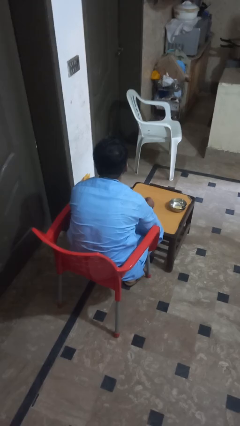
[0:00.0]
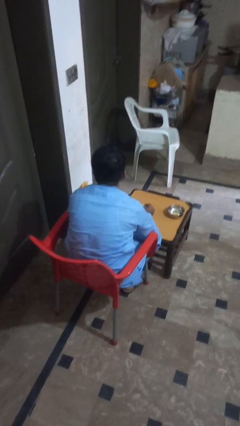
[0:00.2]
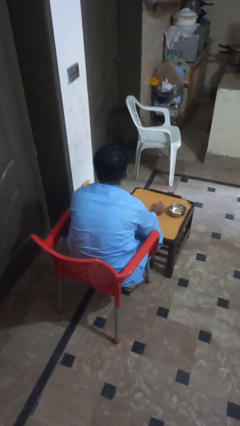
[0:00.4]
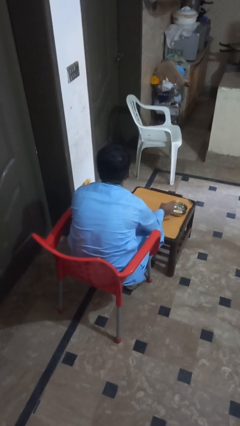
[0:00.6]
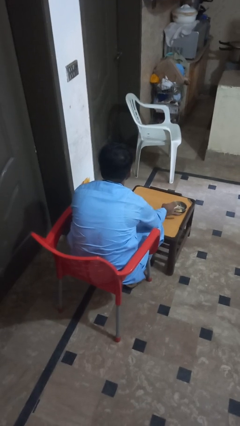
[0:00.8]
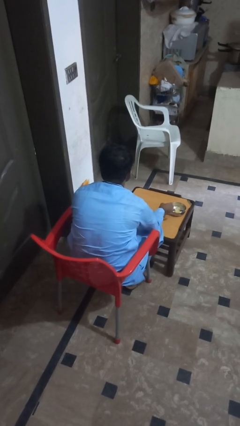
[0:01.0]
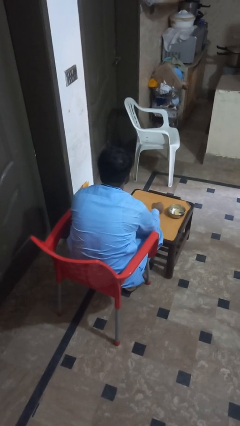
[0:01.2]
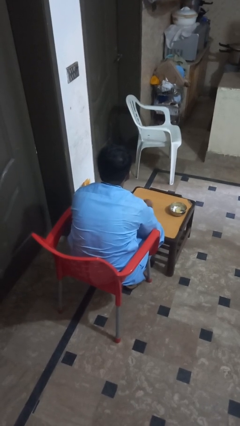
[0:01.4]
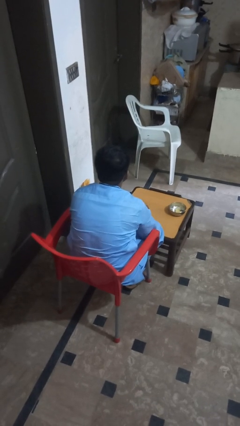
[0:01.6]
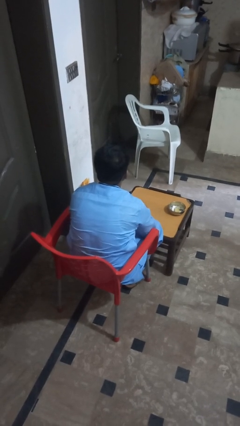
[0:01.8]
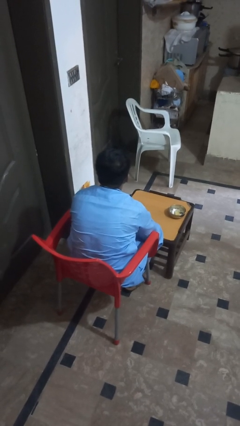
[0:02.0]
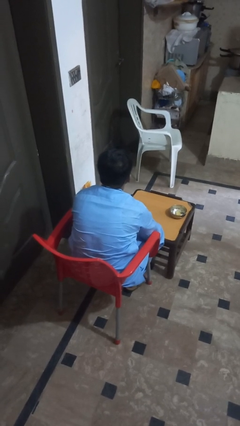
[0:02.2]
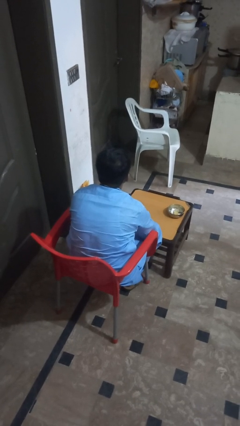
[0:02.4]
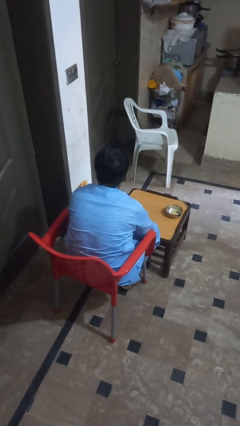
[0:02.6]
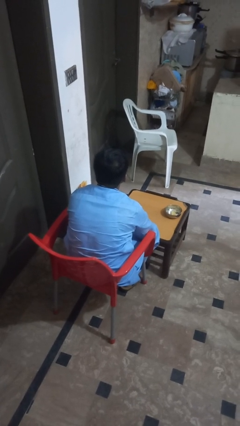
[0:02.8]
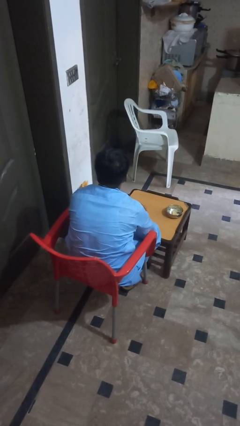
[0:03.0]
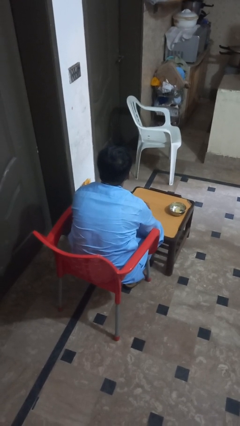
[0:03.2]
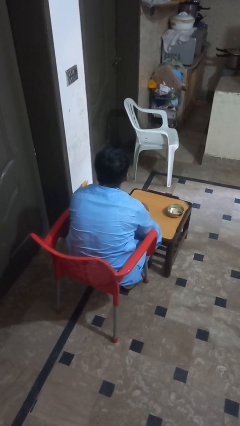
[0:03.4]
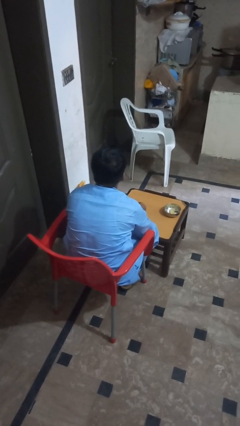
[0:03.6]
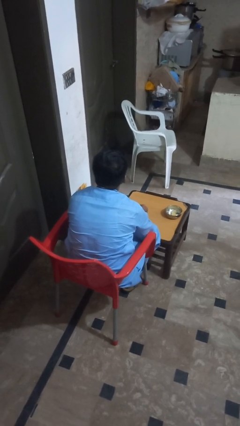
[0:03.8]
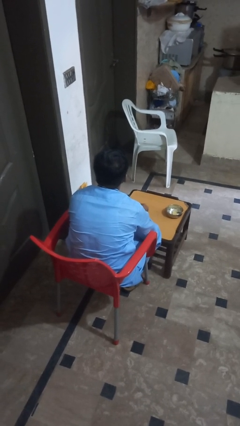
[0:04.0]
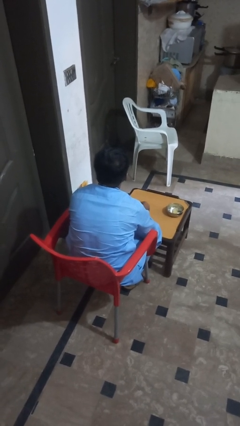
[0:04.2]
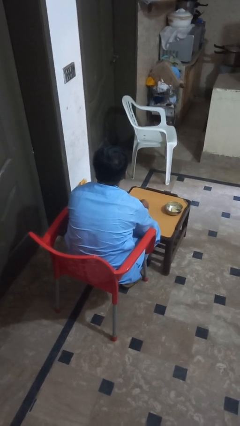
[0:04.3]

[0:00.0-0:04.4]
person pours into bowl

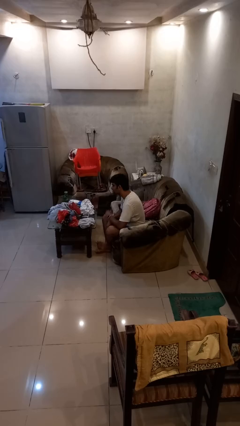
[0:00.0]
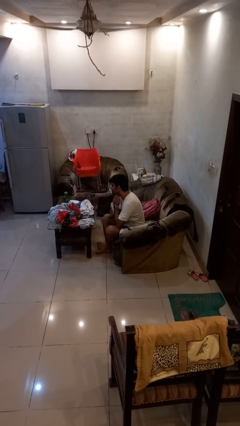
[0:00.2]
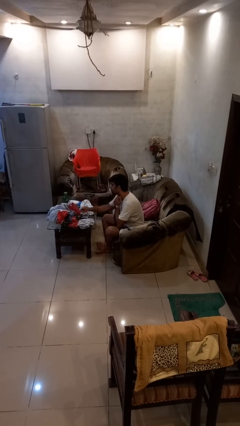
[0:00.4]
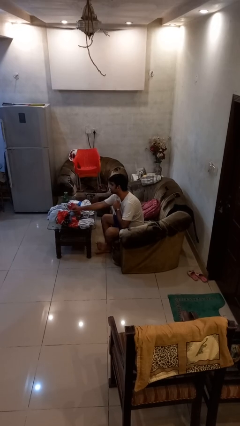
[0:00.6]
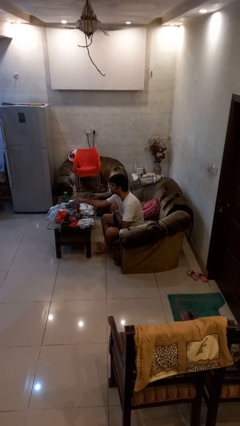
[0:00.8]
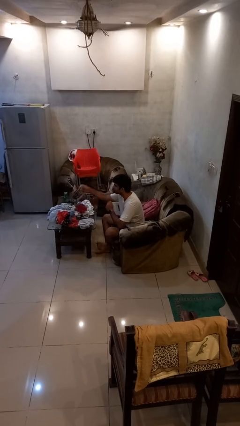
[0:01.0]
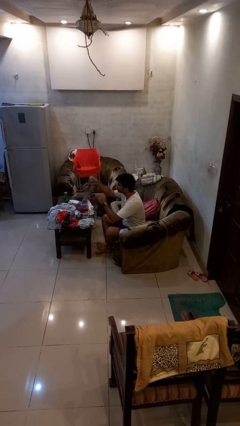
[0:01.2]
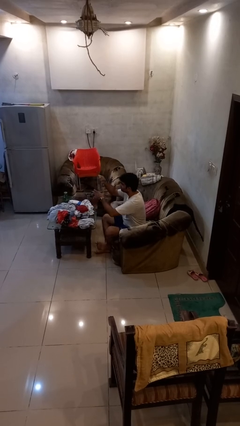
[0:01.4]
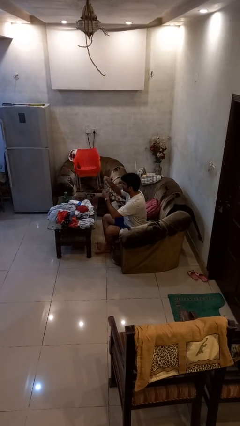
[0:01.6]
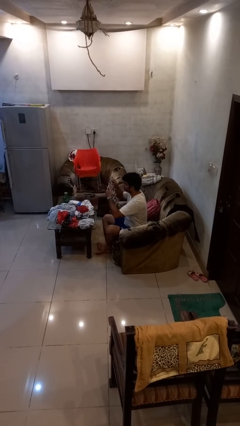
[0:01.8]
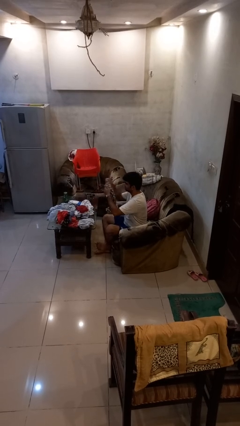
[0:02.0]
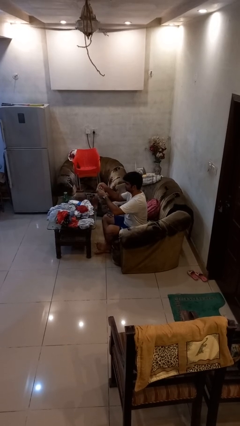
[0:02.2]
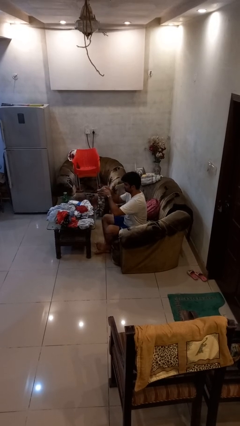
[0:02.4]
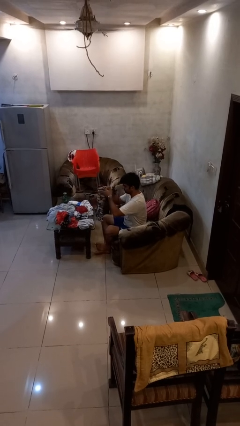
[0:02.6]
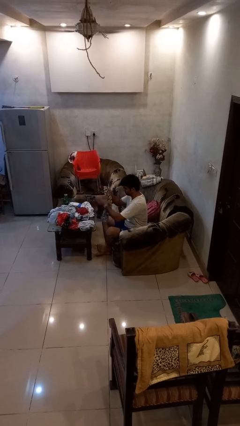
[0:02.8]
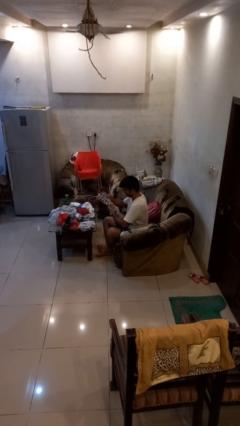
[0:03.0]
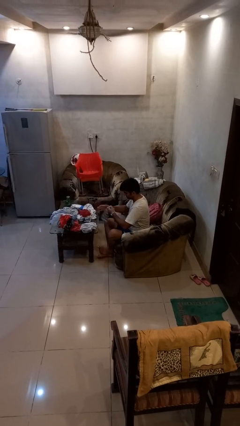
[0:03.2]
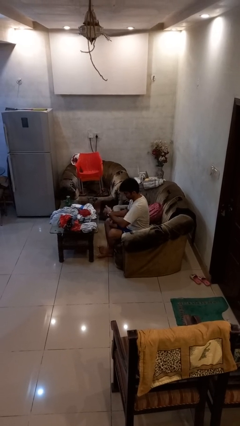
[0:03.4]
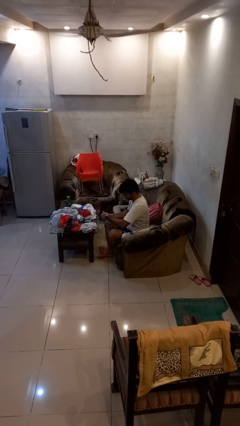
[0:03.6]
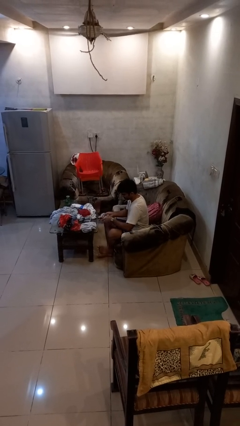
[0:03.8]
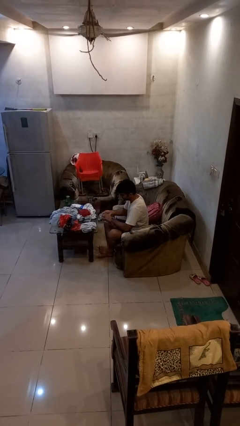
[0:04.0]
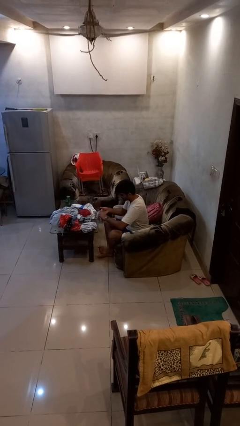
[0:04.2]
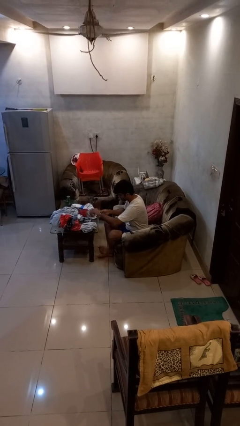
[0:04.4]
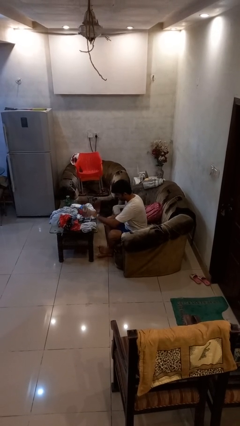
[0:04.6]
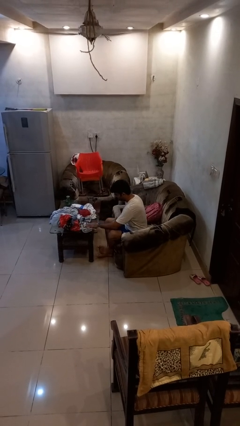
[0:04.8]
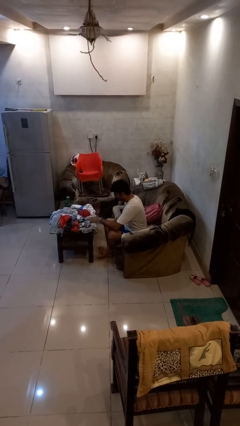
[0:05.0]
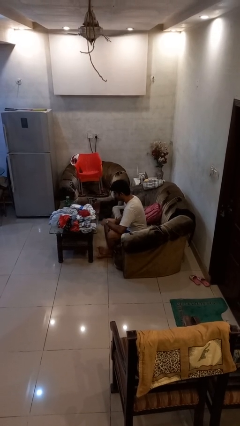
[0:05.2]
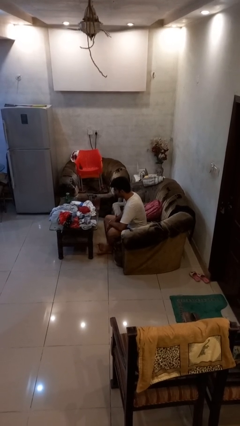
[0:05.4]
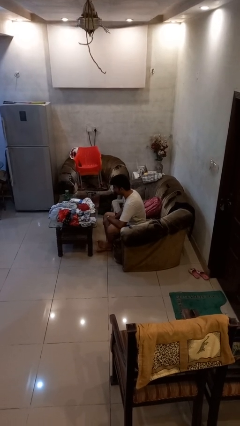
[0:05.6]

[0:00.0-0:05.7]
person folds pants

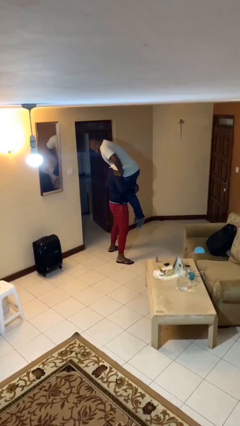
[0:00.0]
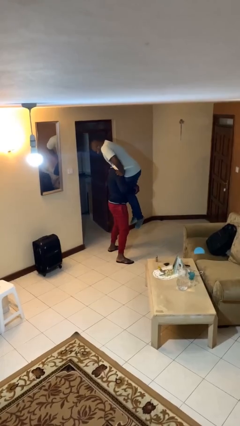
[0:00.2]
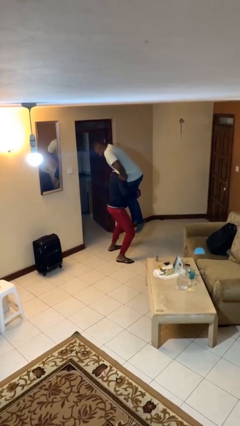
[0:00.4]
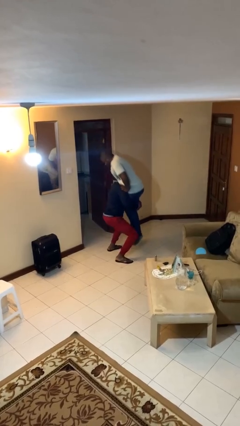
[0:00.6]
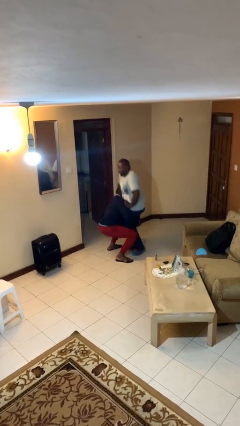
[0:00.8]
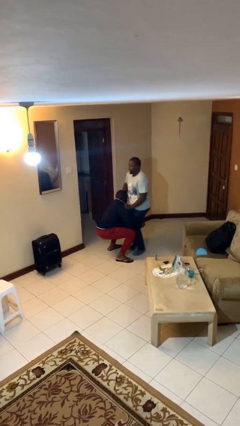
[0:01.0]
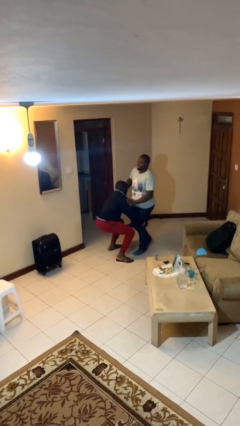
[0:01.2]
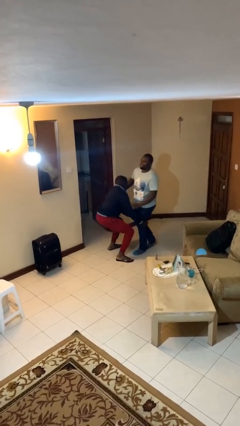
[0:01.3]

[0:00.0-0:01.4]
person puts down person

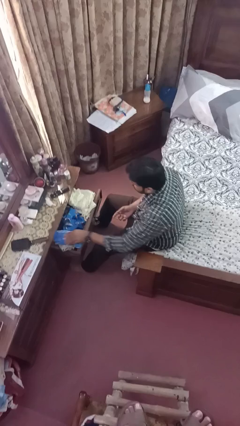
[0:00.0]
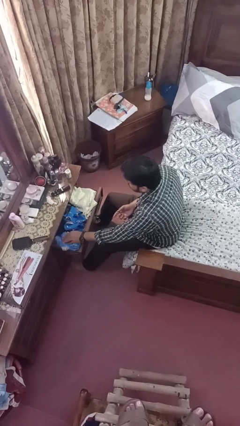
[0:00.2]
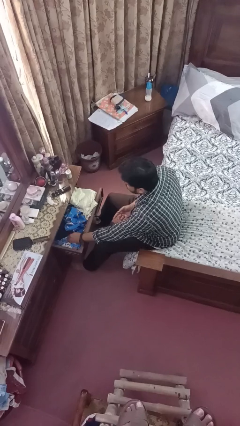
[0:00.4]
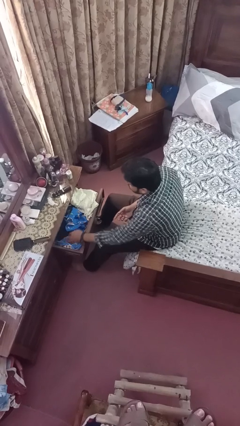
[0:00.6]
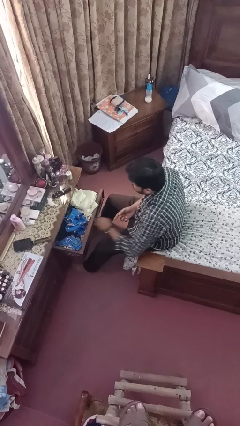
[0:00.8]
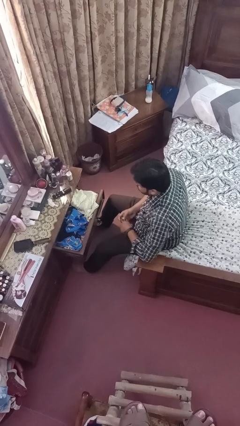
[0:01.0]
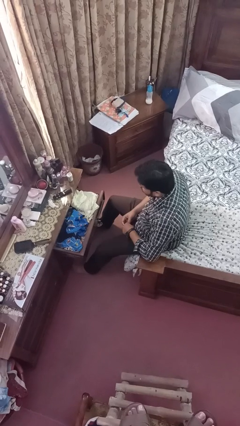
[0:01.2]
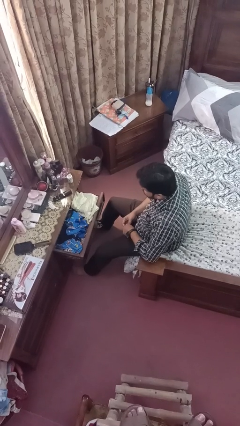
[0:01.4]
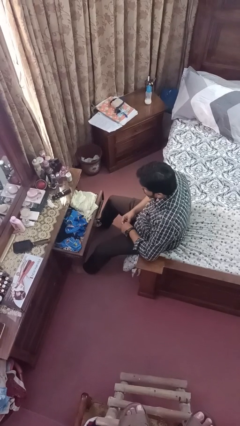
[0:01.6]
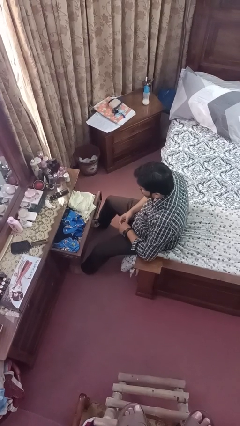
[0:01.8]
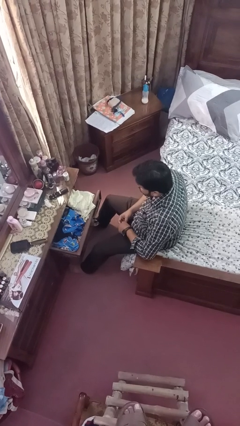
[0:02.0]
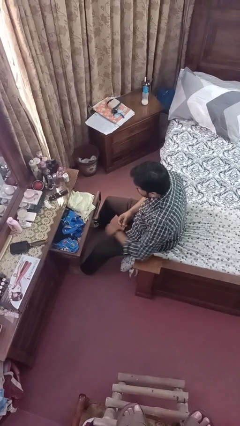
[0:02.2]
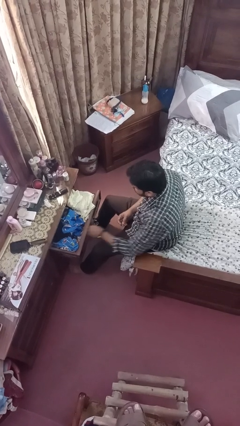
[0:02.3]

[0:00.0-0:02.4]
person puts clothes into dresser

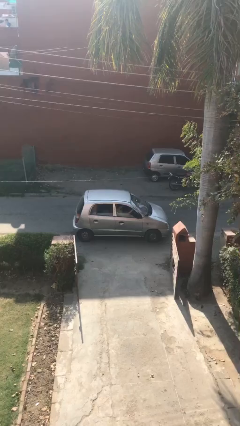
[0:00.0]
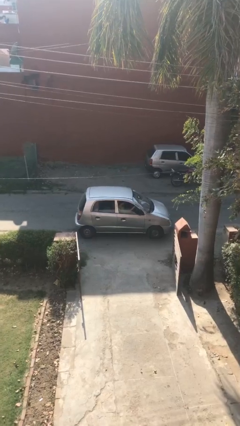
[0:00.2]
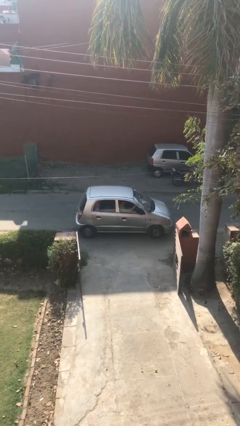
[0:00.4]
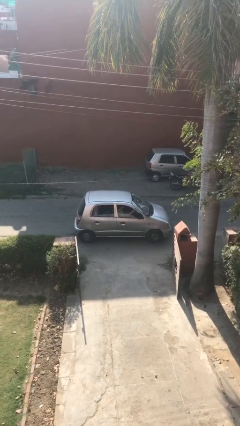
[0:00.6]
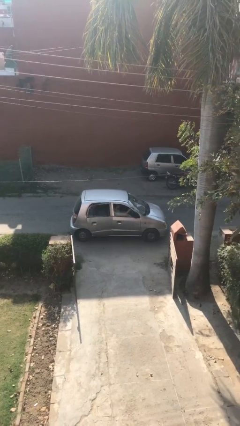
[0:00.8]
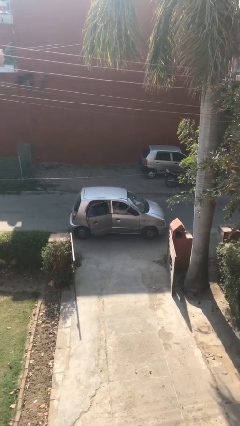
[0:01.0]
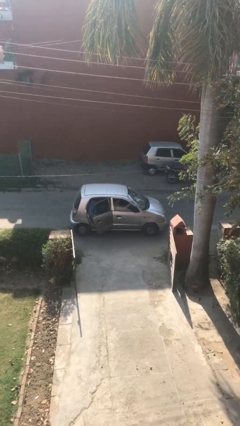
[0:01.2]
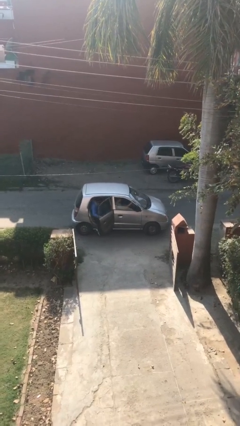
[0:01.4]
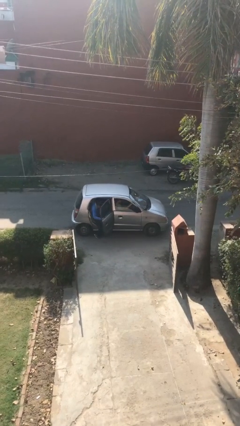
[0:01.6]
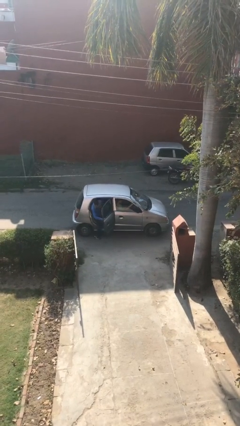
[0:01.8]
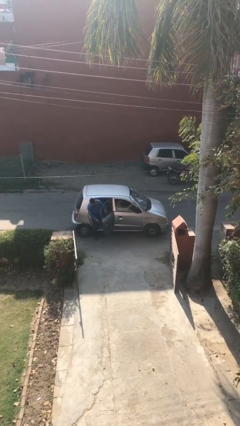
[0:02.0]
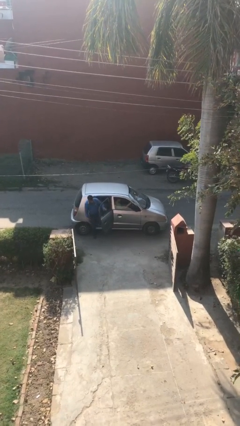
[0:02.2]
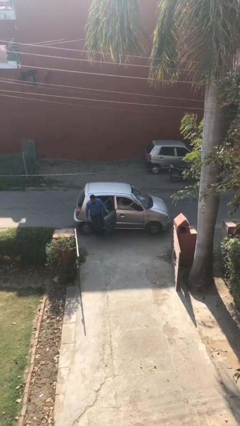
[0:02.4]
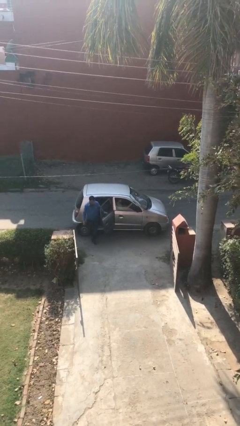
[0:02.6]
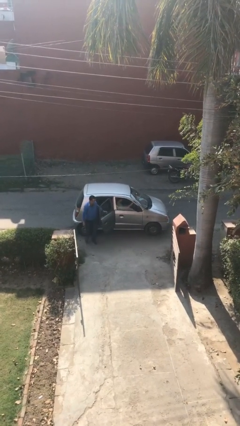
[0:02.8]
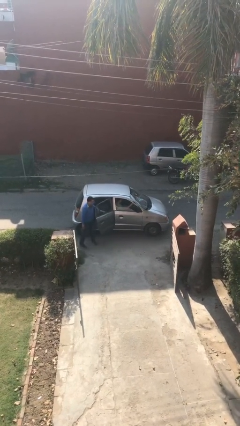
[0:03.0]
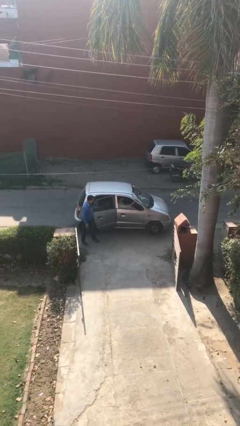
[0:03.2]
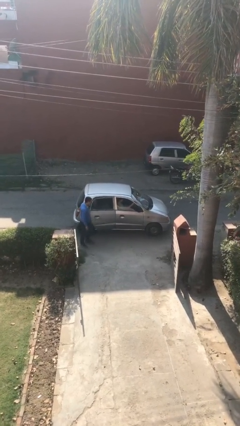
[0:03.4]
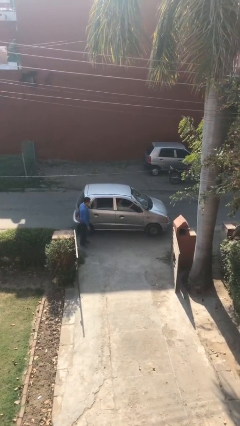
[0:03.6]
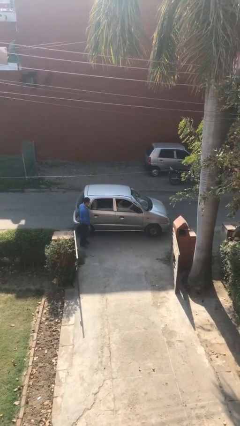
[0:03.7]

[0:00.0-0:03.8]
car drops off person
